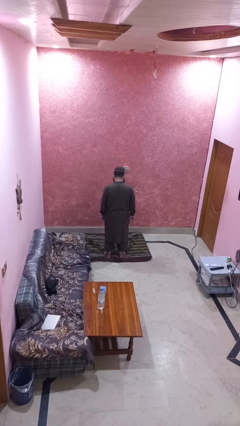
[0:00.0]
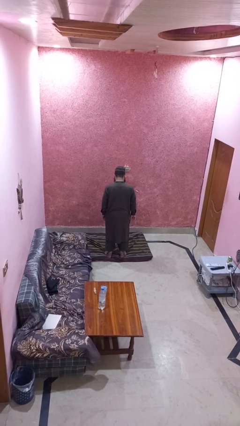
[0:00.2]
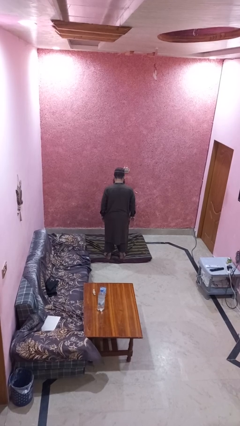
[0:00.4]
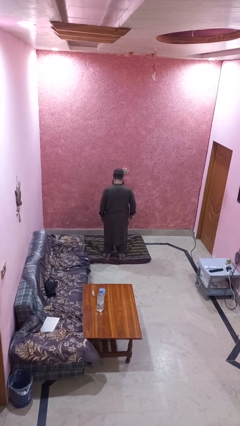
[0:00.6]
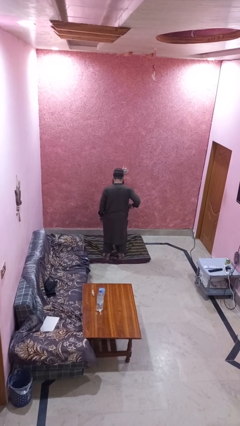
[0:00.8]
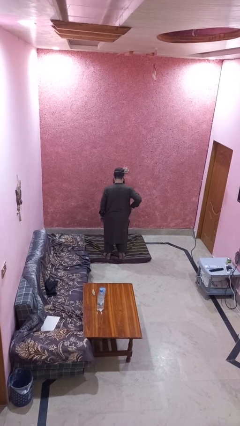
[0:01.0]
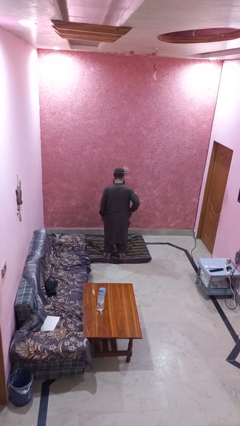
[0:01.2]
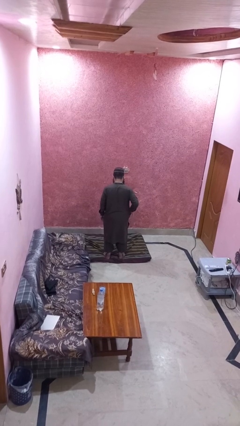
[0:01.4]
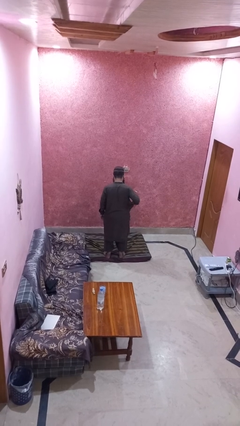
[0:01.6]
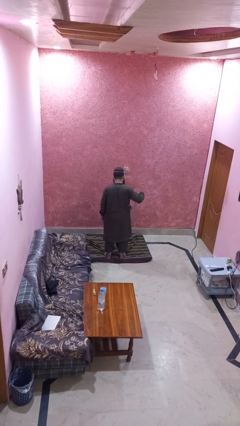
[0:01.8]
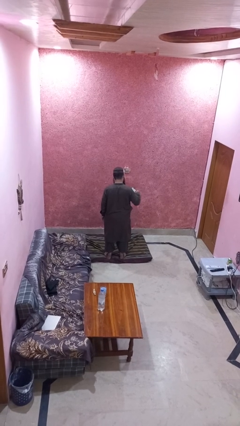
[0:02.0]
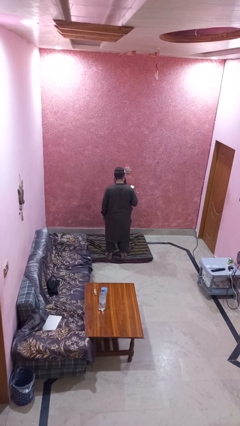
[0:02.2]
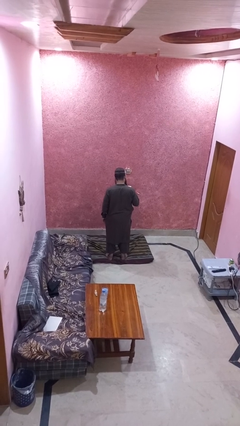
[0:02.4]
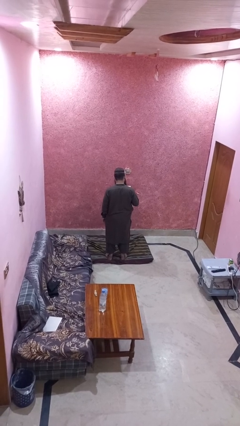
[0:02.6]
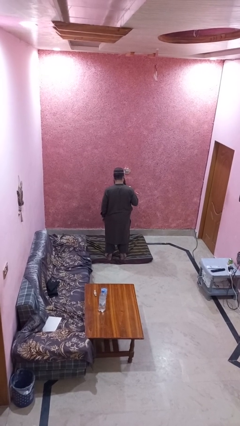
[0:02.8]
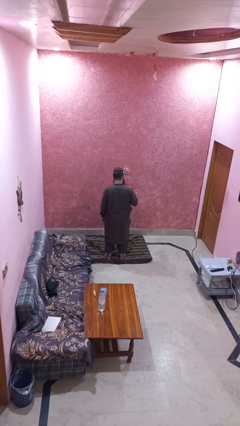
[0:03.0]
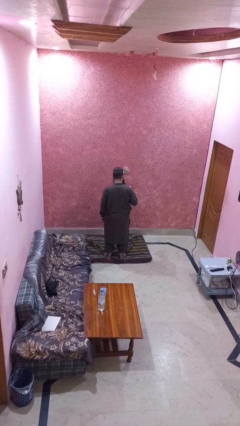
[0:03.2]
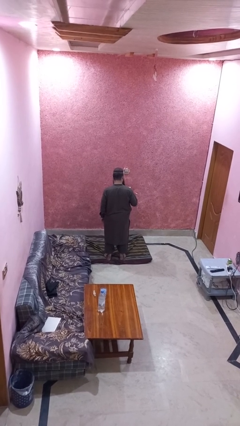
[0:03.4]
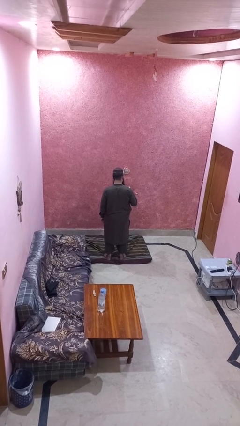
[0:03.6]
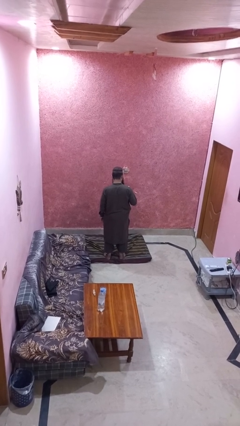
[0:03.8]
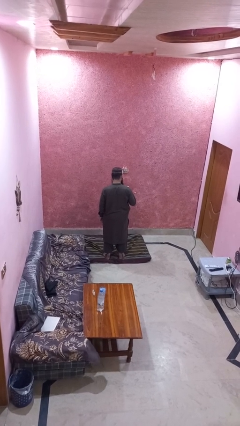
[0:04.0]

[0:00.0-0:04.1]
person takes phone from pocket

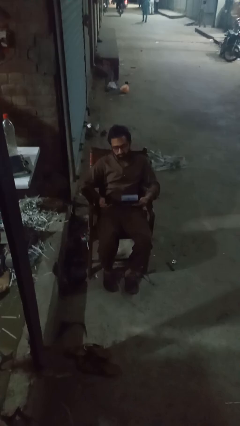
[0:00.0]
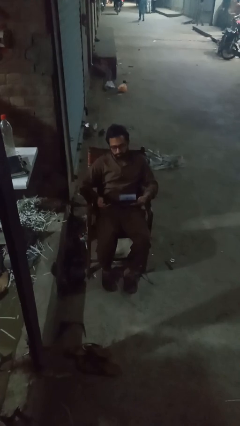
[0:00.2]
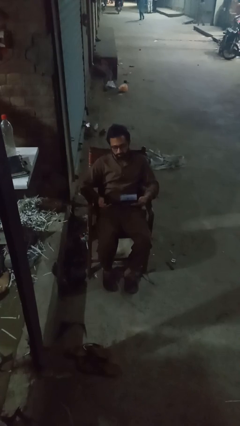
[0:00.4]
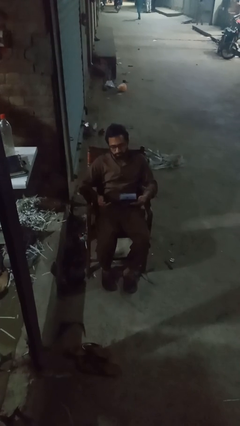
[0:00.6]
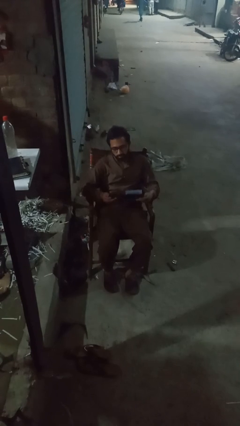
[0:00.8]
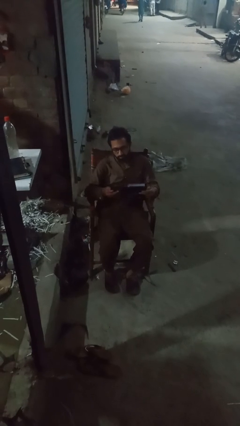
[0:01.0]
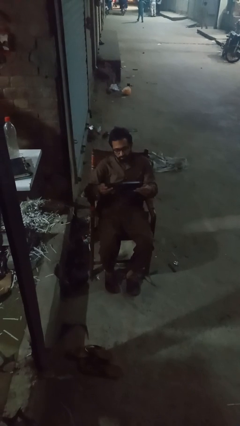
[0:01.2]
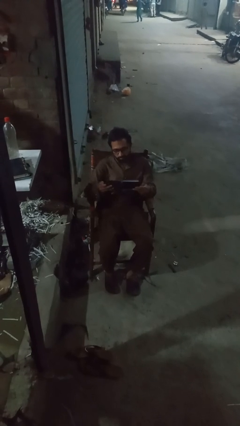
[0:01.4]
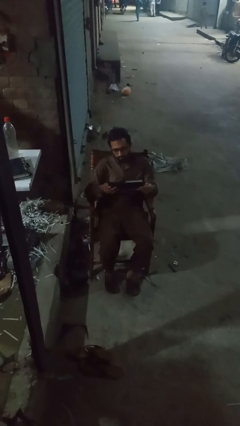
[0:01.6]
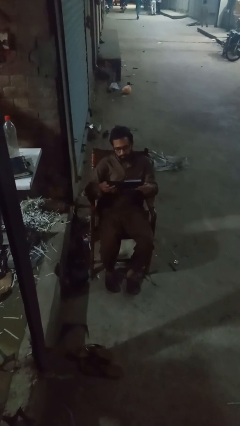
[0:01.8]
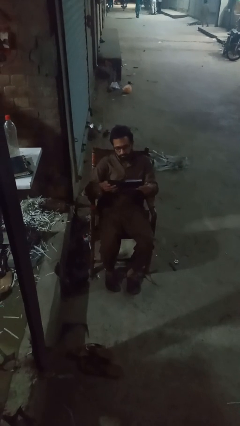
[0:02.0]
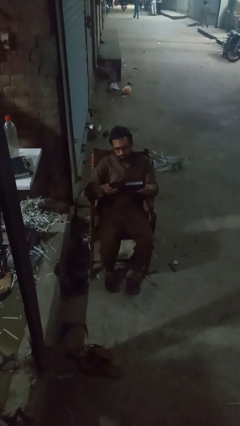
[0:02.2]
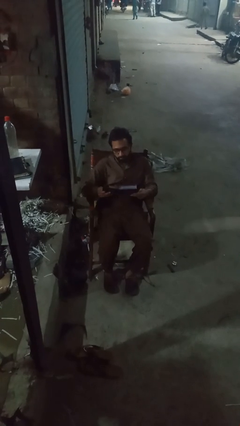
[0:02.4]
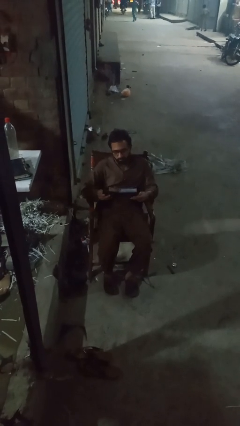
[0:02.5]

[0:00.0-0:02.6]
person interacts with handheld game

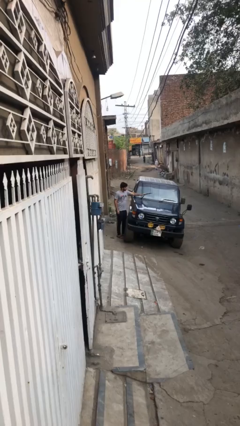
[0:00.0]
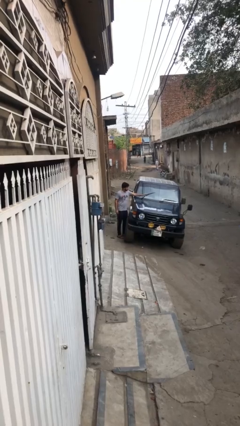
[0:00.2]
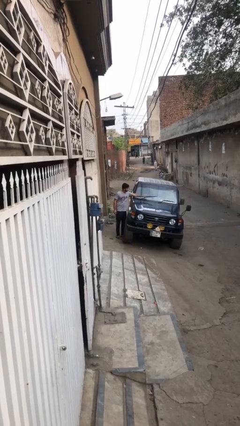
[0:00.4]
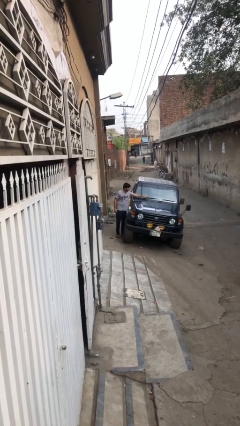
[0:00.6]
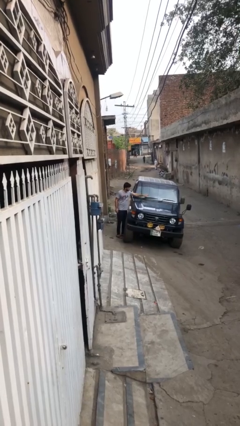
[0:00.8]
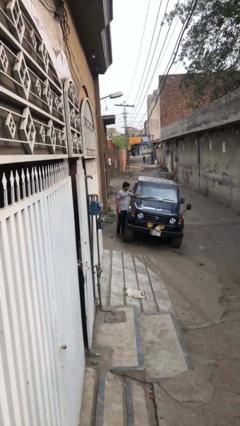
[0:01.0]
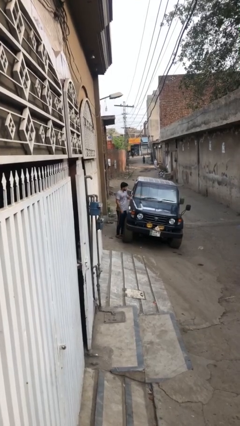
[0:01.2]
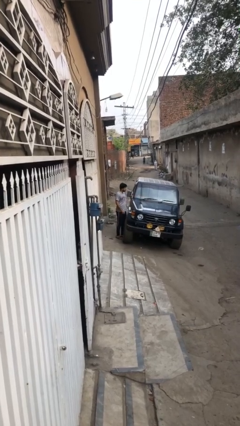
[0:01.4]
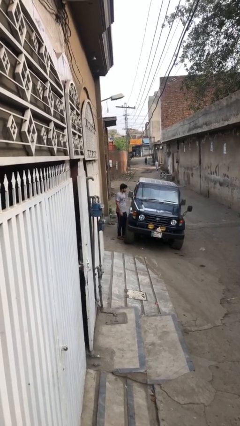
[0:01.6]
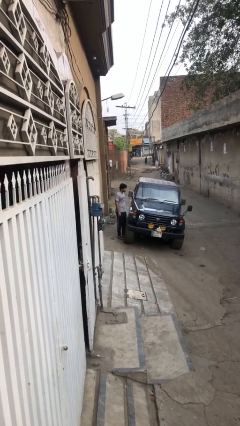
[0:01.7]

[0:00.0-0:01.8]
person flips down car wipers

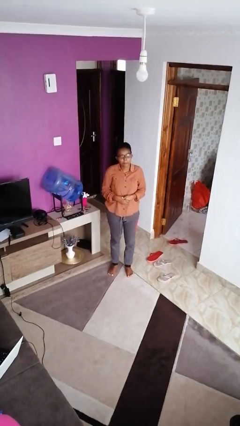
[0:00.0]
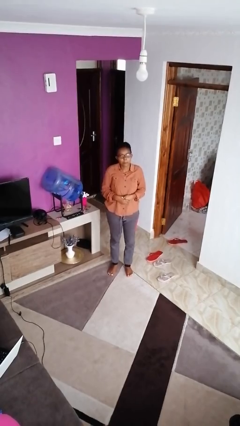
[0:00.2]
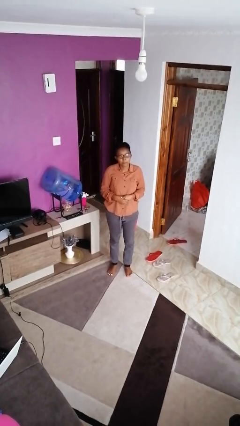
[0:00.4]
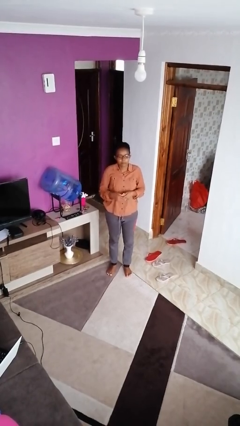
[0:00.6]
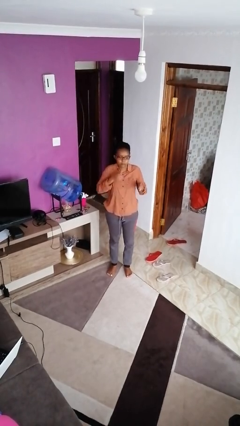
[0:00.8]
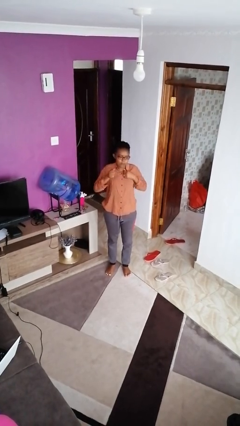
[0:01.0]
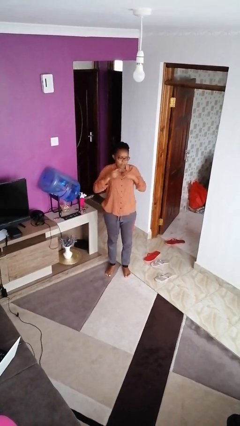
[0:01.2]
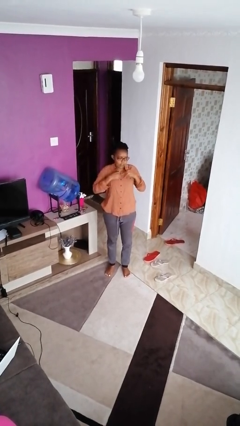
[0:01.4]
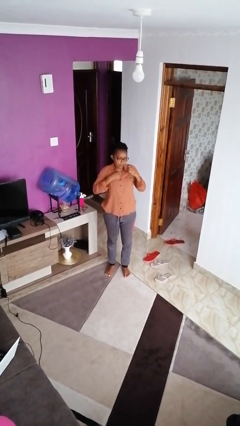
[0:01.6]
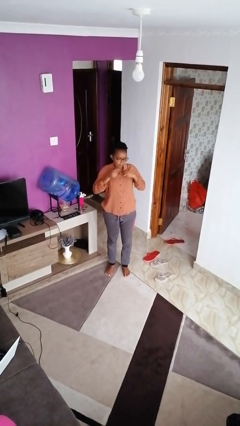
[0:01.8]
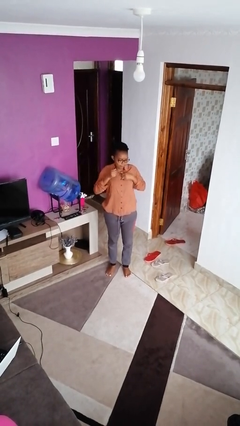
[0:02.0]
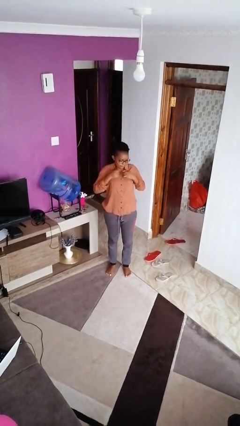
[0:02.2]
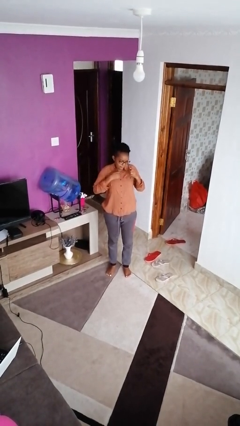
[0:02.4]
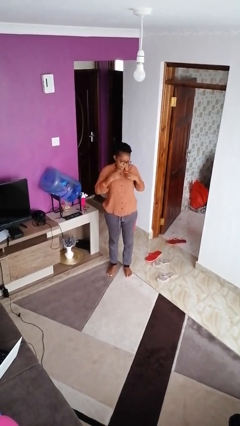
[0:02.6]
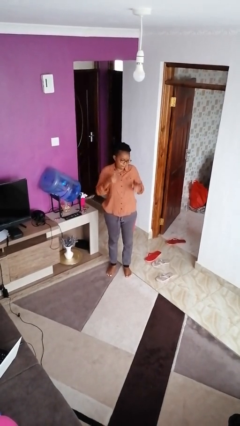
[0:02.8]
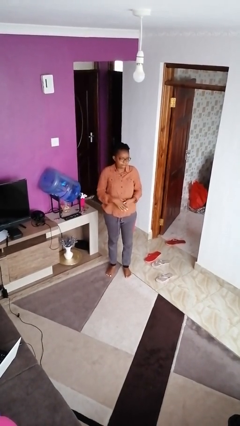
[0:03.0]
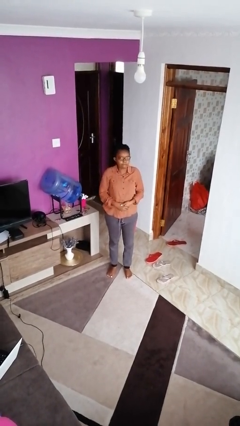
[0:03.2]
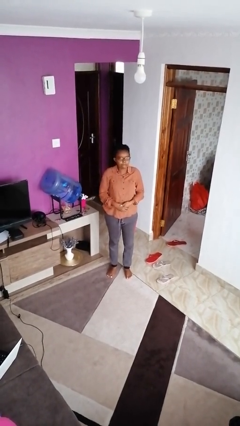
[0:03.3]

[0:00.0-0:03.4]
person drums on chest

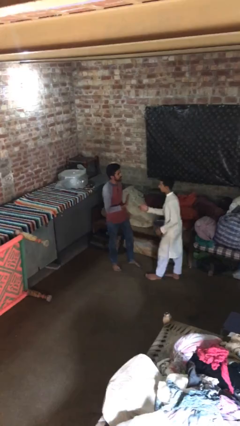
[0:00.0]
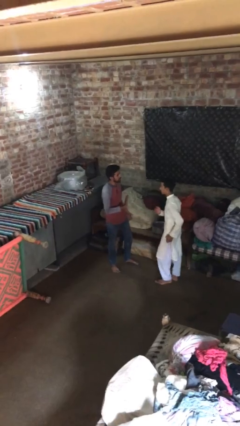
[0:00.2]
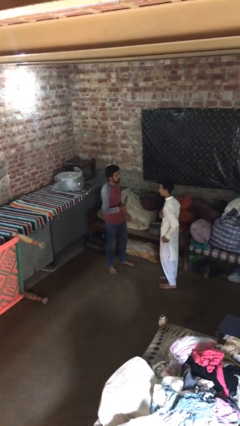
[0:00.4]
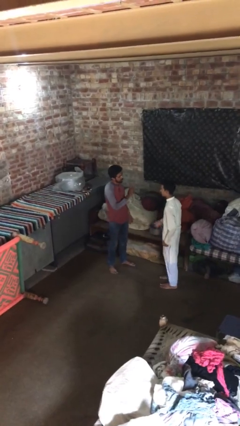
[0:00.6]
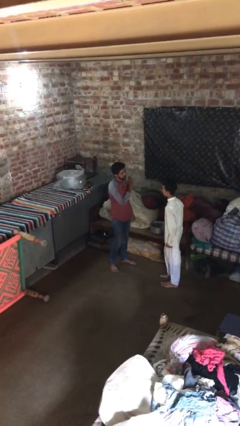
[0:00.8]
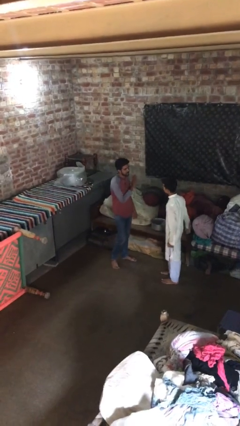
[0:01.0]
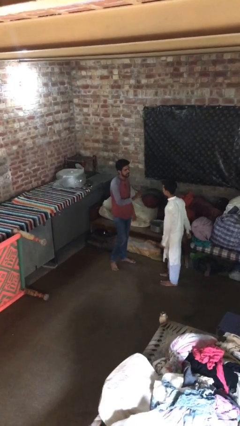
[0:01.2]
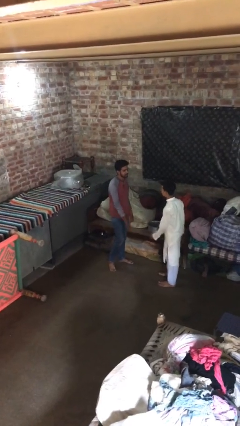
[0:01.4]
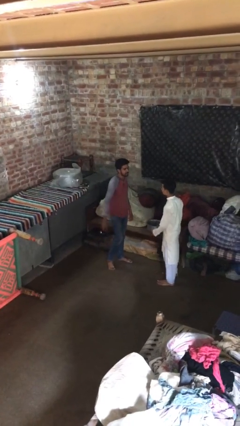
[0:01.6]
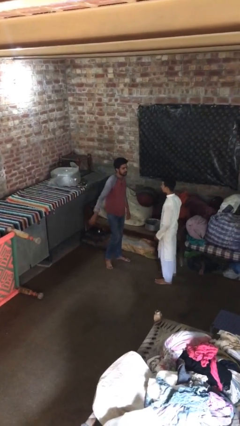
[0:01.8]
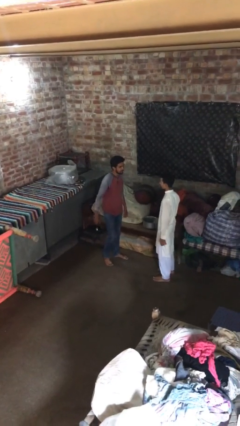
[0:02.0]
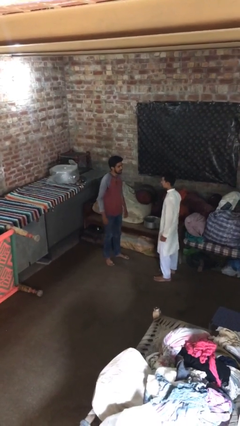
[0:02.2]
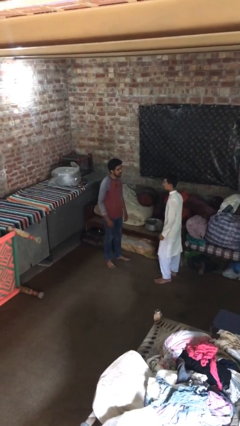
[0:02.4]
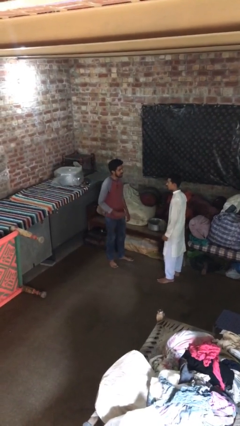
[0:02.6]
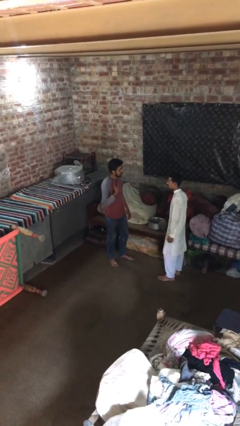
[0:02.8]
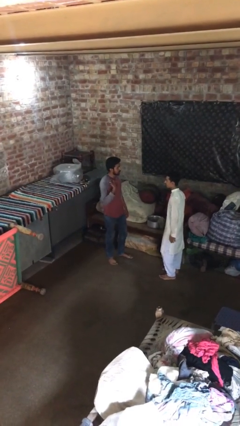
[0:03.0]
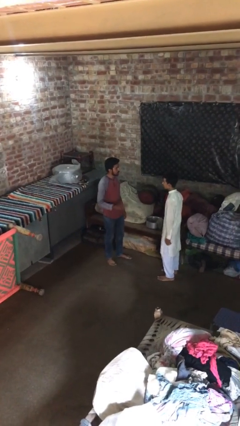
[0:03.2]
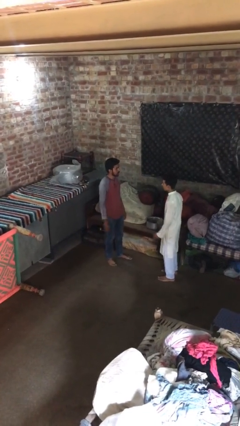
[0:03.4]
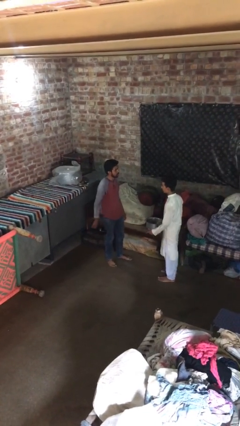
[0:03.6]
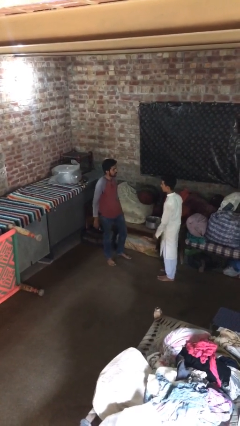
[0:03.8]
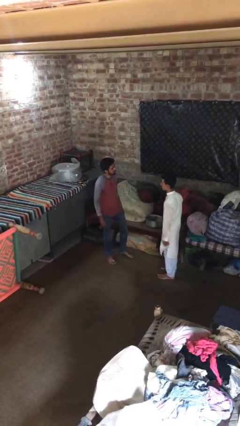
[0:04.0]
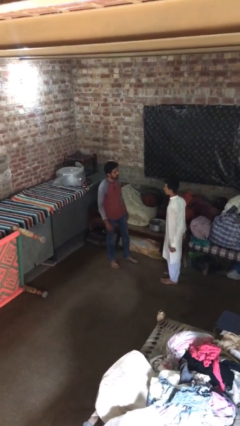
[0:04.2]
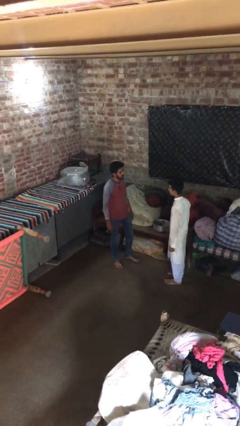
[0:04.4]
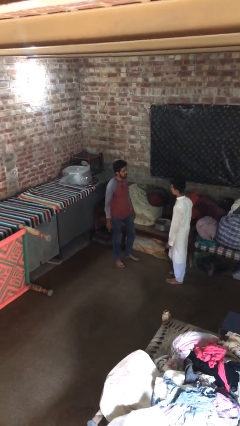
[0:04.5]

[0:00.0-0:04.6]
person talks to person

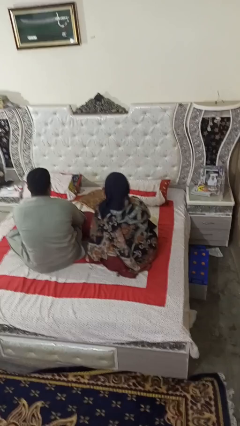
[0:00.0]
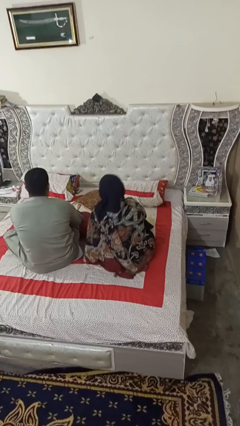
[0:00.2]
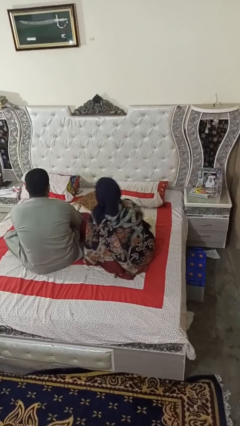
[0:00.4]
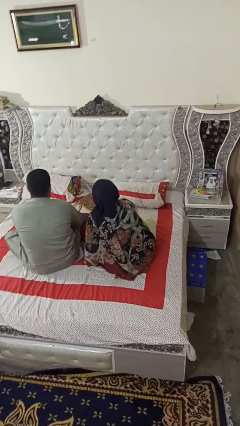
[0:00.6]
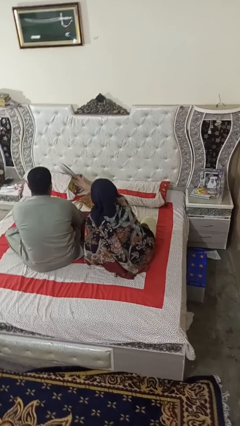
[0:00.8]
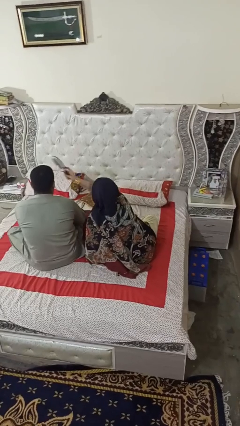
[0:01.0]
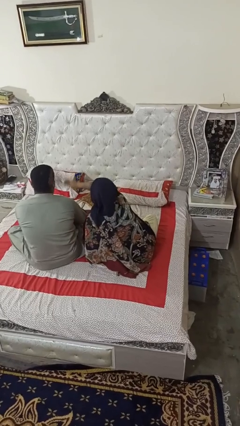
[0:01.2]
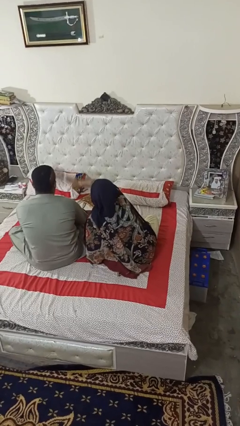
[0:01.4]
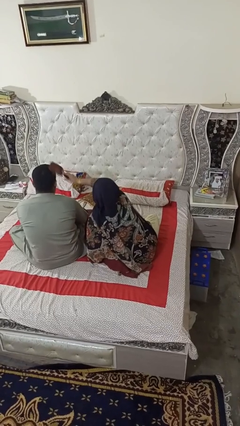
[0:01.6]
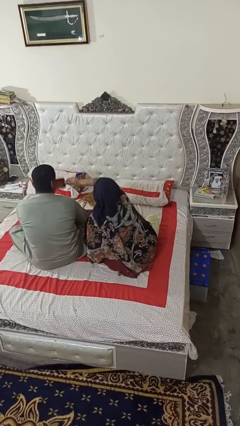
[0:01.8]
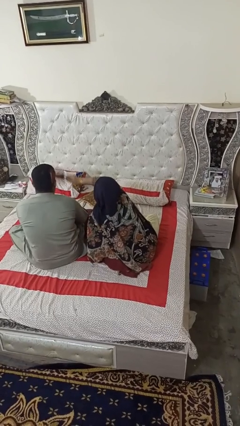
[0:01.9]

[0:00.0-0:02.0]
person brushes hair of person
